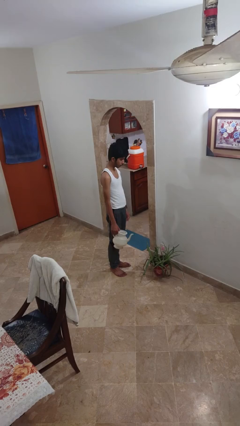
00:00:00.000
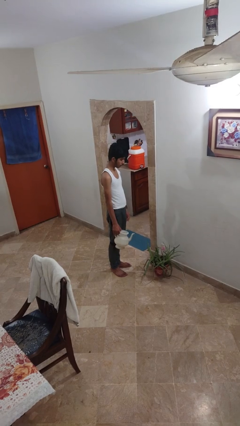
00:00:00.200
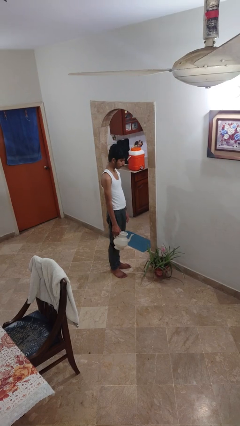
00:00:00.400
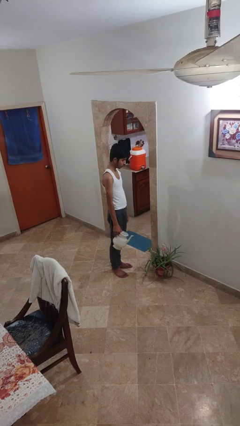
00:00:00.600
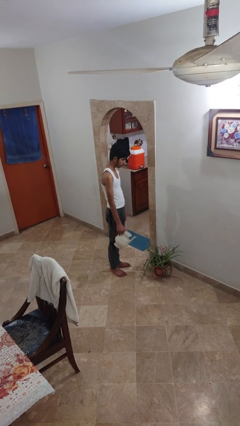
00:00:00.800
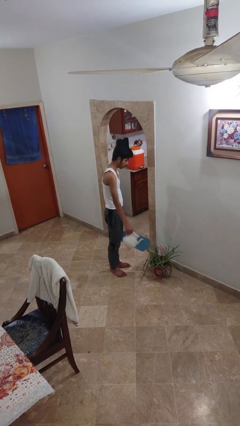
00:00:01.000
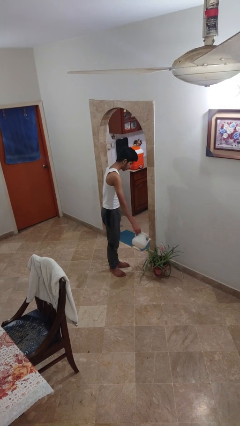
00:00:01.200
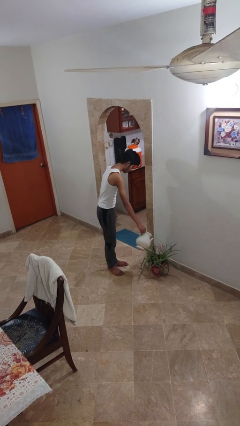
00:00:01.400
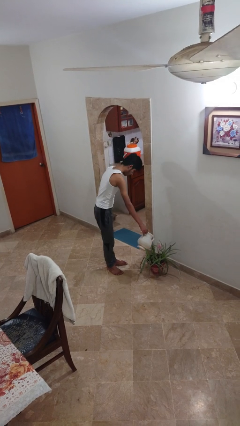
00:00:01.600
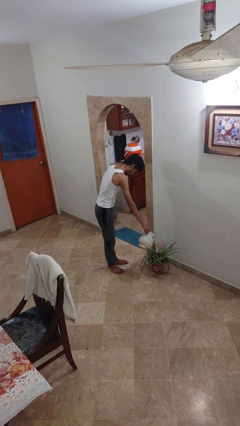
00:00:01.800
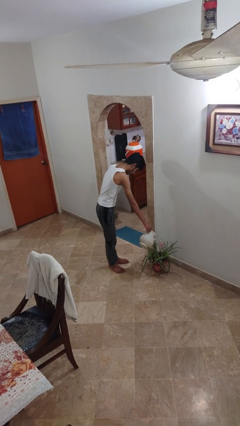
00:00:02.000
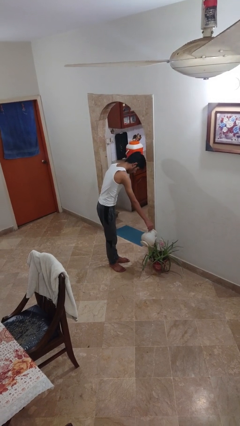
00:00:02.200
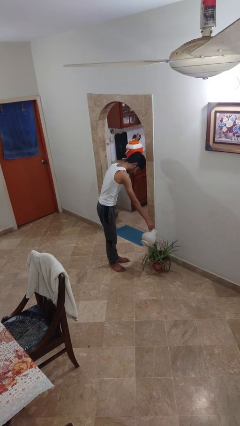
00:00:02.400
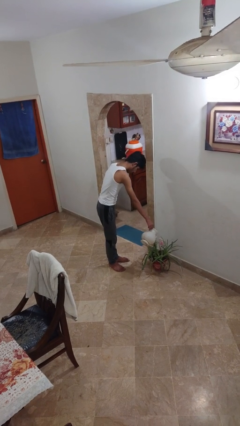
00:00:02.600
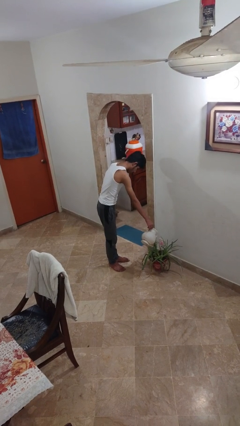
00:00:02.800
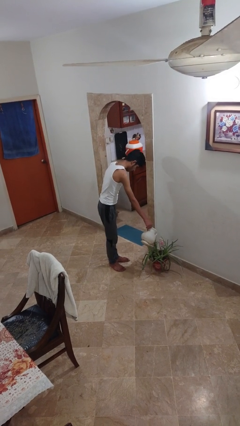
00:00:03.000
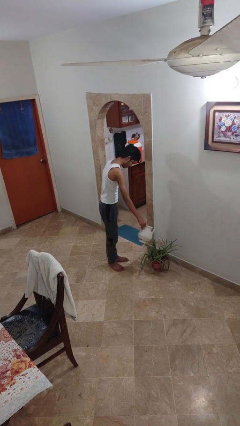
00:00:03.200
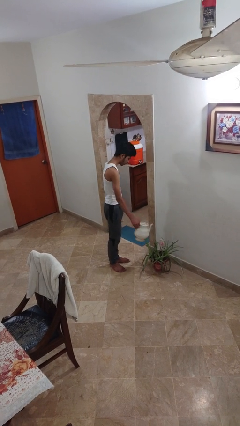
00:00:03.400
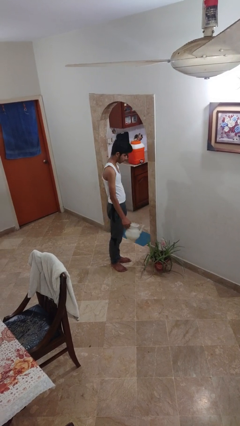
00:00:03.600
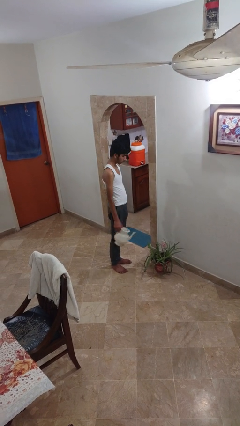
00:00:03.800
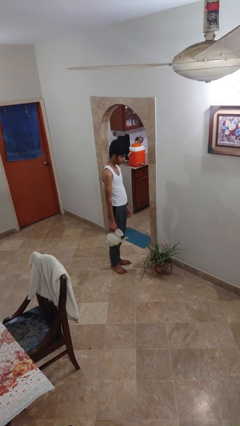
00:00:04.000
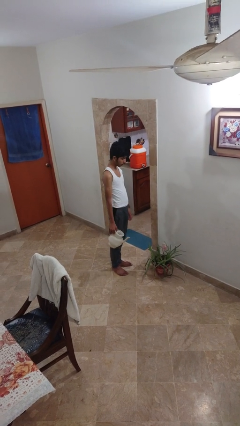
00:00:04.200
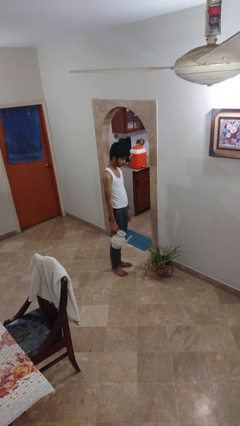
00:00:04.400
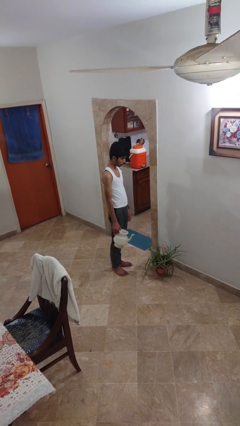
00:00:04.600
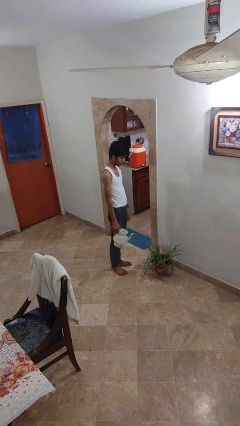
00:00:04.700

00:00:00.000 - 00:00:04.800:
person waters houseplant

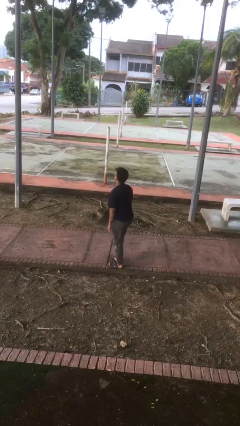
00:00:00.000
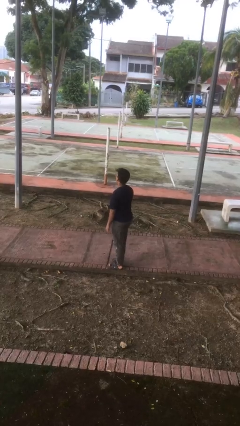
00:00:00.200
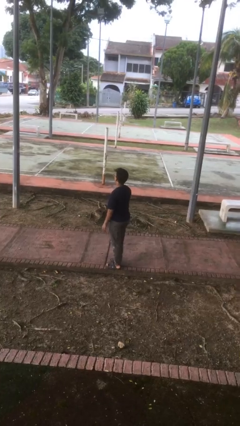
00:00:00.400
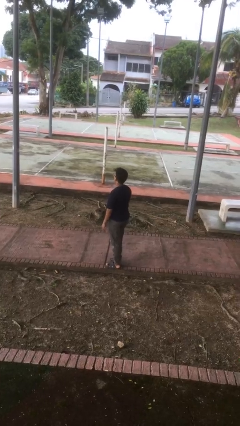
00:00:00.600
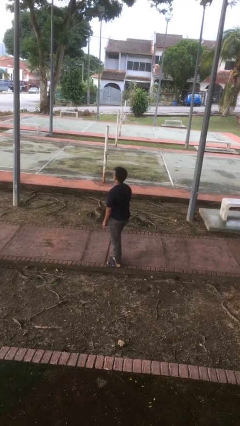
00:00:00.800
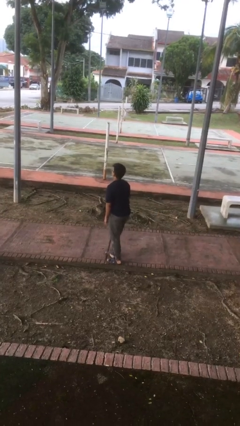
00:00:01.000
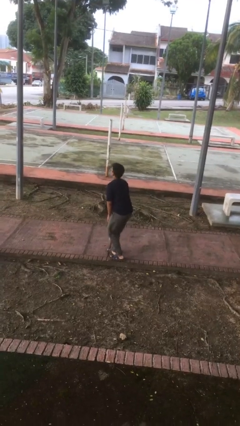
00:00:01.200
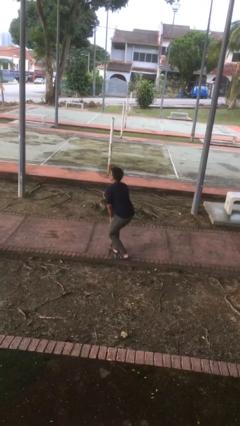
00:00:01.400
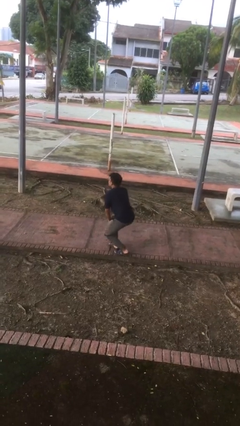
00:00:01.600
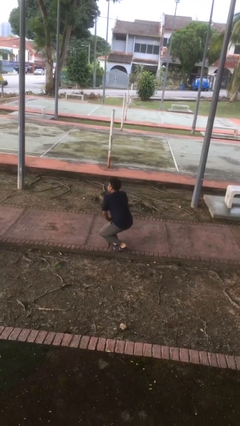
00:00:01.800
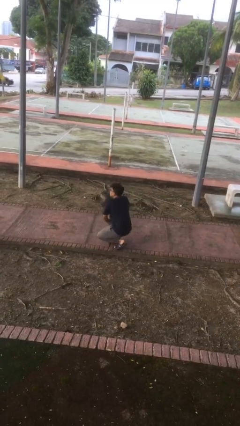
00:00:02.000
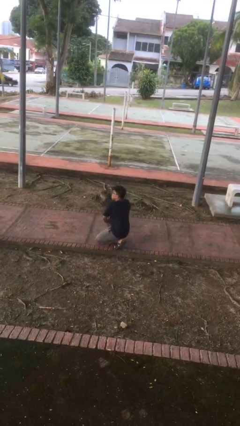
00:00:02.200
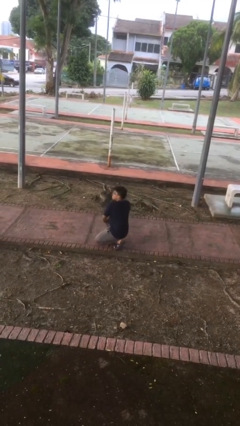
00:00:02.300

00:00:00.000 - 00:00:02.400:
person kneels

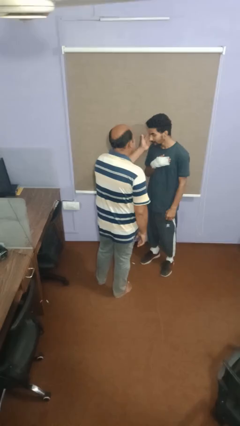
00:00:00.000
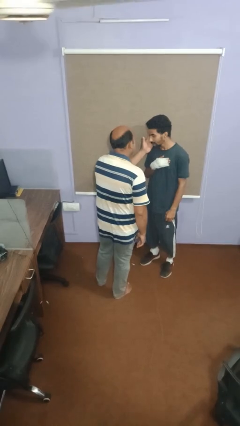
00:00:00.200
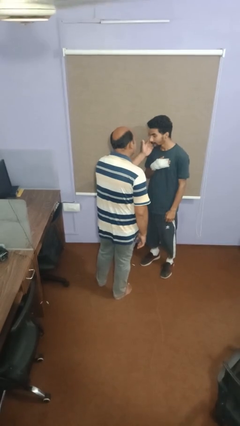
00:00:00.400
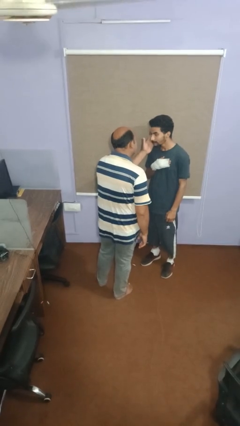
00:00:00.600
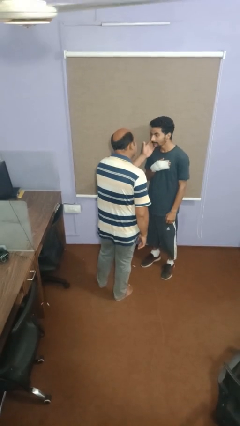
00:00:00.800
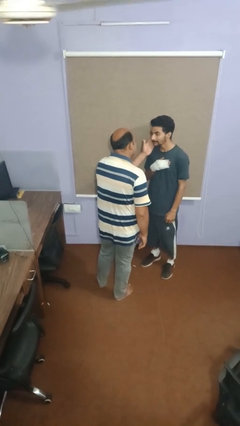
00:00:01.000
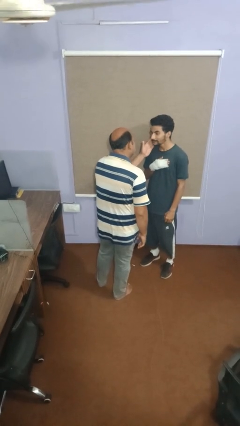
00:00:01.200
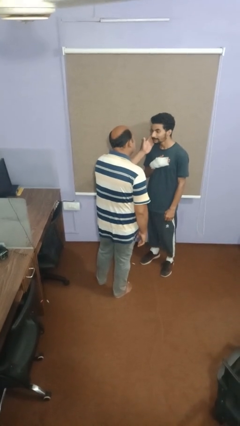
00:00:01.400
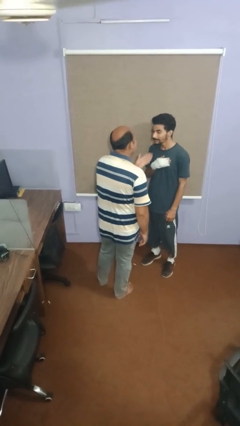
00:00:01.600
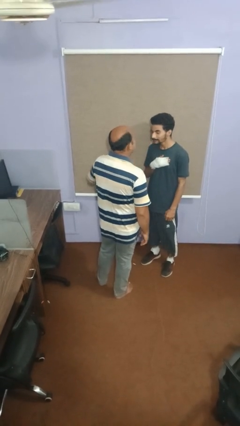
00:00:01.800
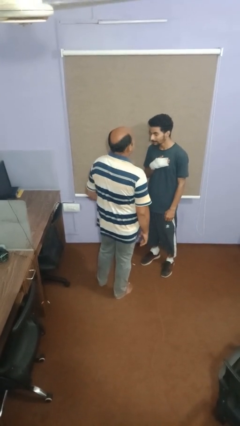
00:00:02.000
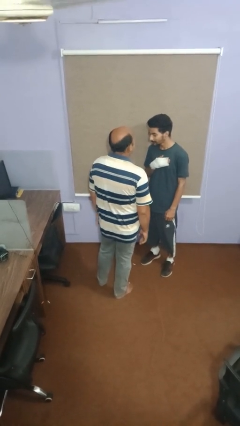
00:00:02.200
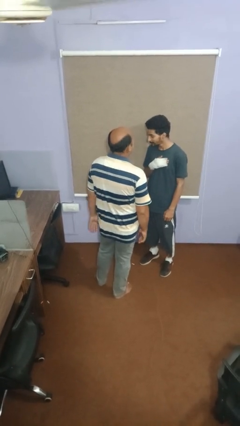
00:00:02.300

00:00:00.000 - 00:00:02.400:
person touches face of person

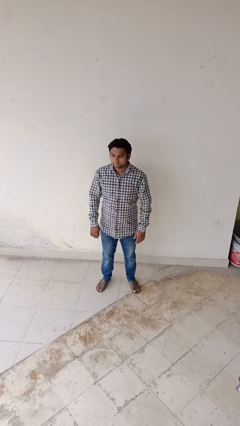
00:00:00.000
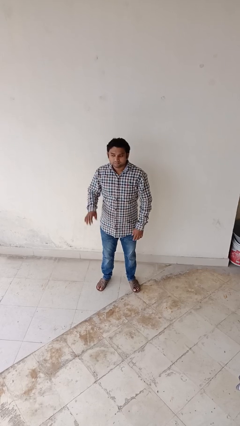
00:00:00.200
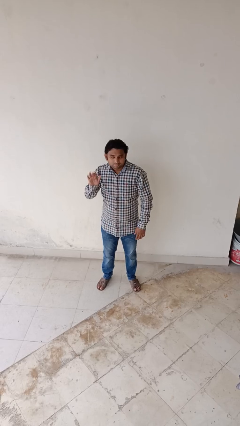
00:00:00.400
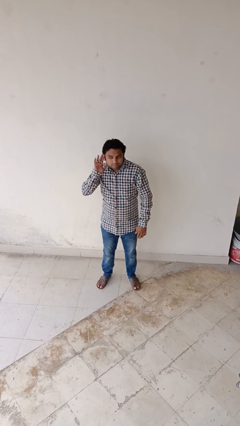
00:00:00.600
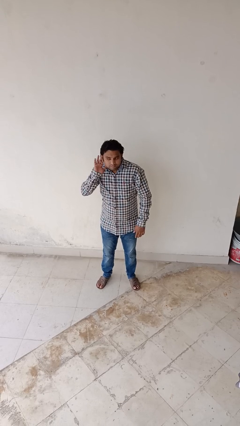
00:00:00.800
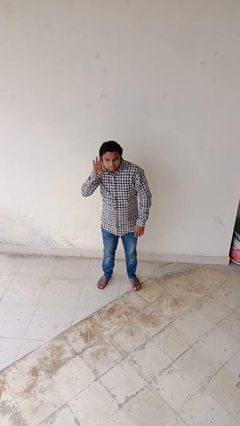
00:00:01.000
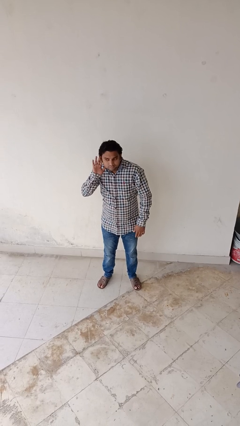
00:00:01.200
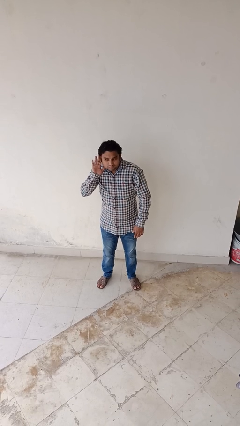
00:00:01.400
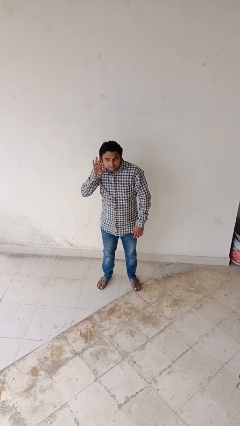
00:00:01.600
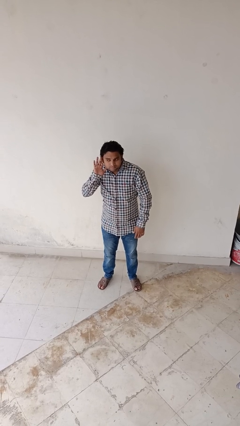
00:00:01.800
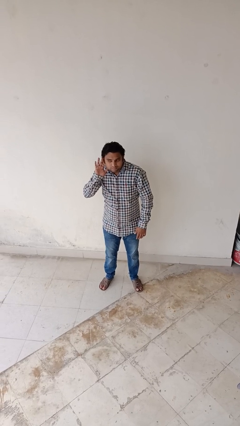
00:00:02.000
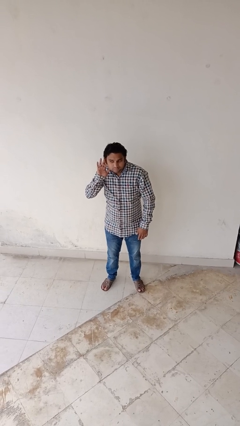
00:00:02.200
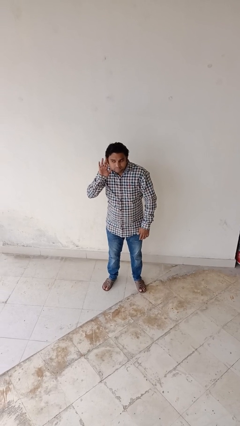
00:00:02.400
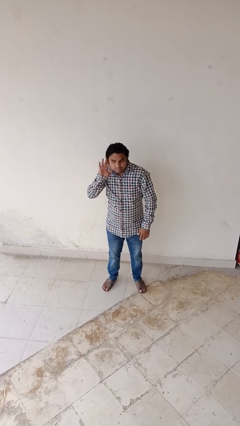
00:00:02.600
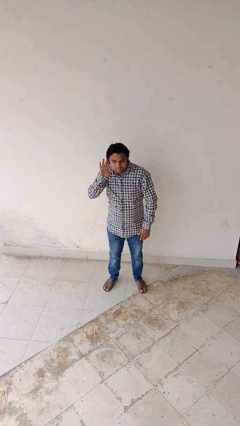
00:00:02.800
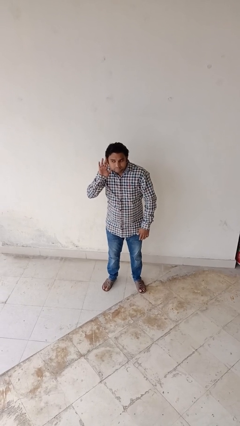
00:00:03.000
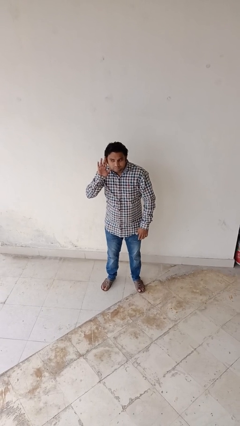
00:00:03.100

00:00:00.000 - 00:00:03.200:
person gestures listen closely

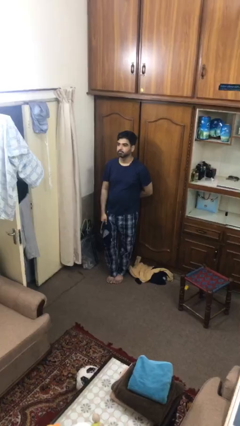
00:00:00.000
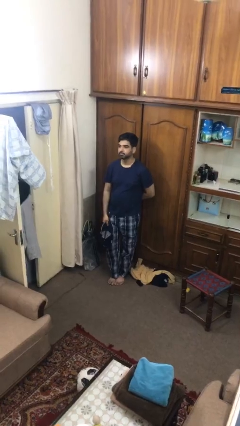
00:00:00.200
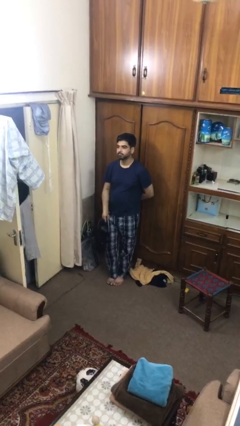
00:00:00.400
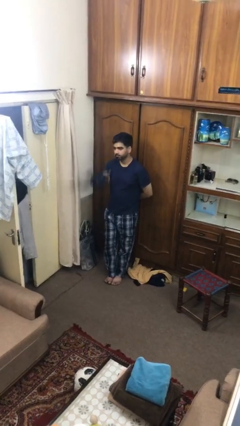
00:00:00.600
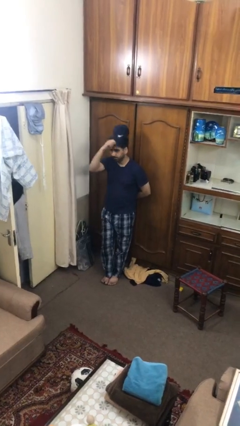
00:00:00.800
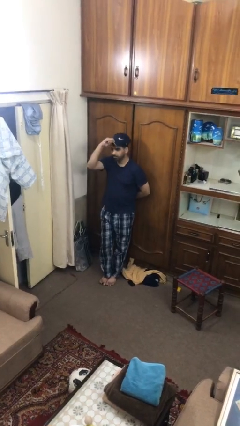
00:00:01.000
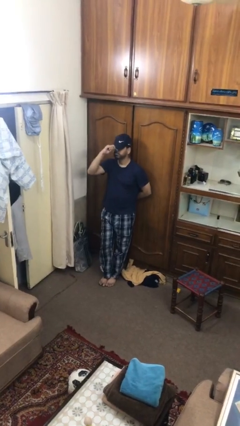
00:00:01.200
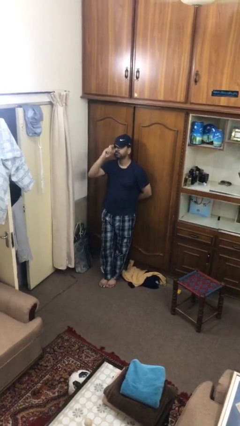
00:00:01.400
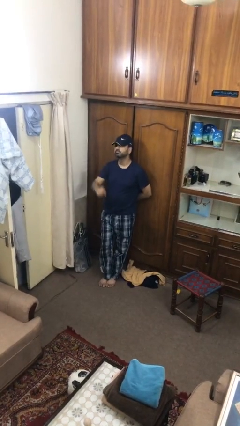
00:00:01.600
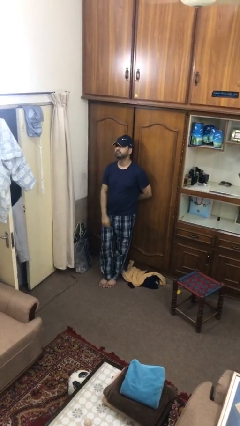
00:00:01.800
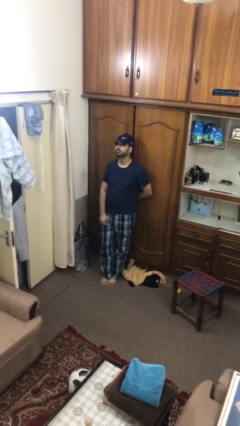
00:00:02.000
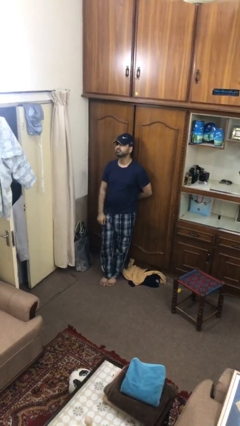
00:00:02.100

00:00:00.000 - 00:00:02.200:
person puts on hat

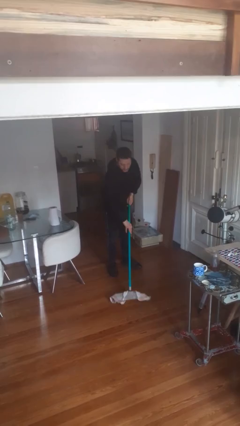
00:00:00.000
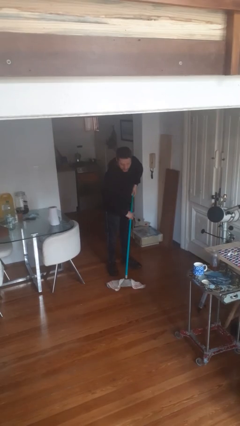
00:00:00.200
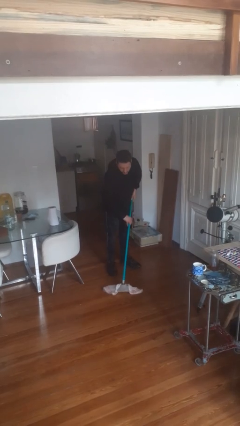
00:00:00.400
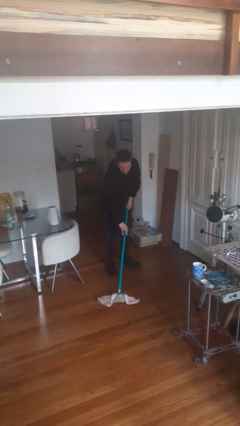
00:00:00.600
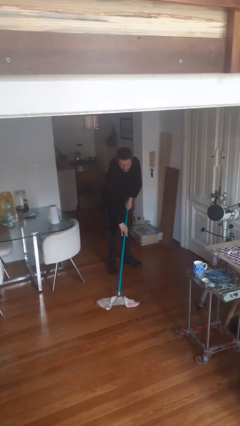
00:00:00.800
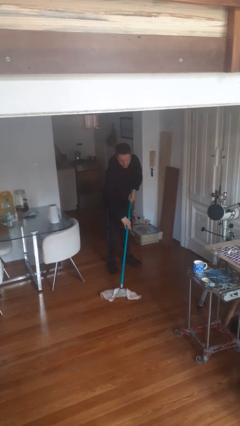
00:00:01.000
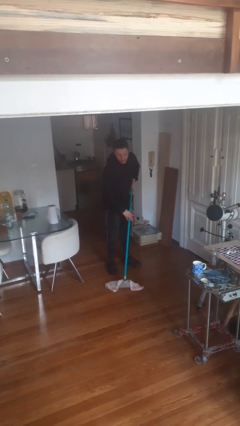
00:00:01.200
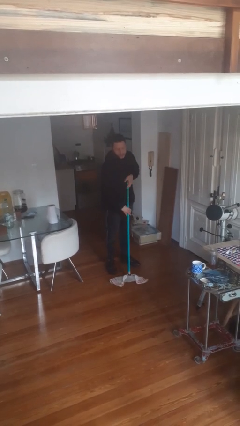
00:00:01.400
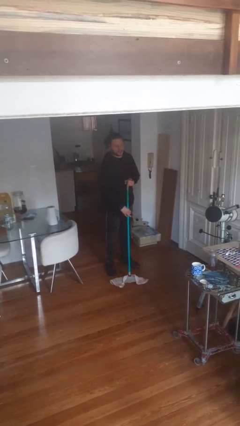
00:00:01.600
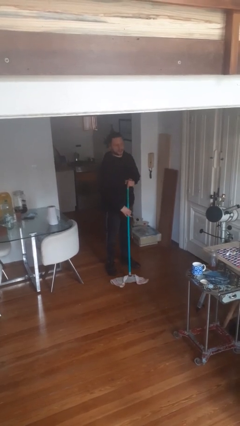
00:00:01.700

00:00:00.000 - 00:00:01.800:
person mops

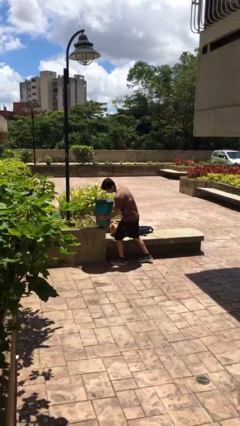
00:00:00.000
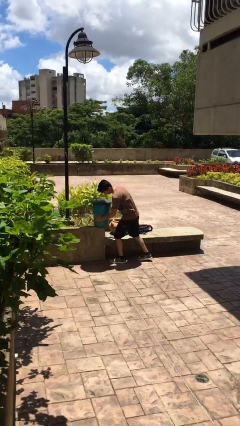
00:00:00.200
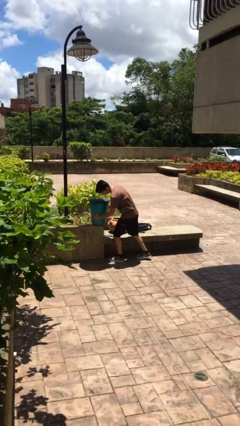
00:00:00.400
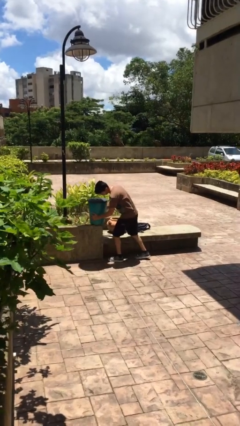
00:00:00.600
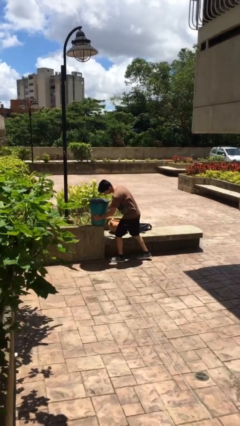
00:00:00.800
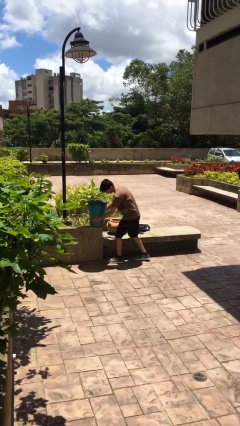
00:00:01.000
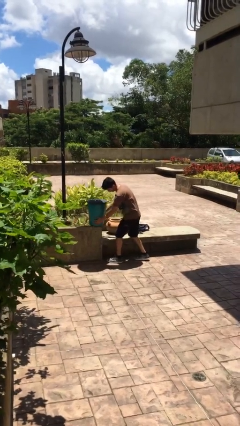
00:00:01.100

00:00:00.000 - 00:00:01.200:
person puts down object on floor
